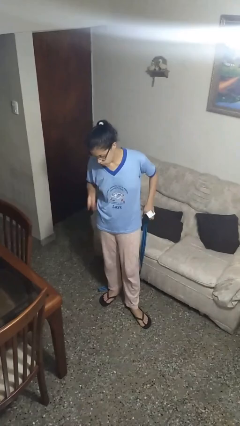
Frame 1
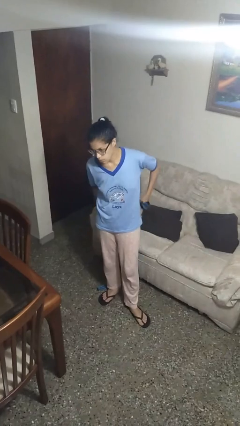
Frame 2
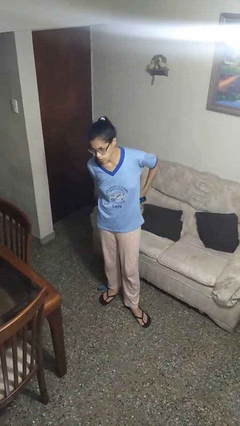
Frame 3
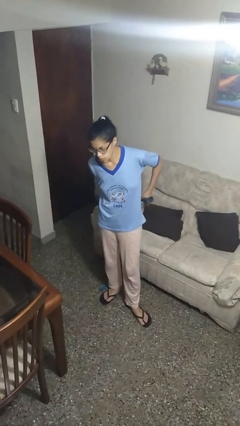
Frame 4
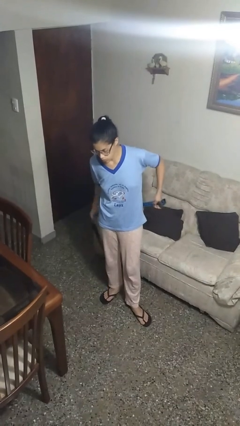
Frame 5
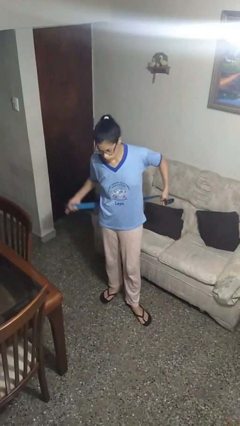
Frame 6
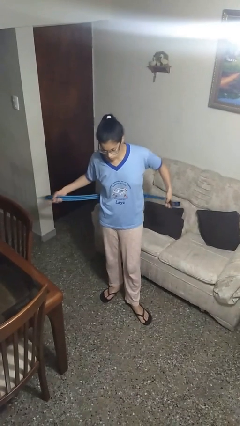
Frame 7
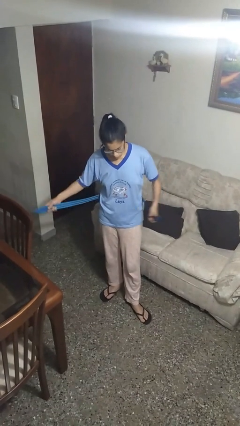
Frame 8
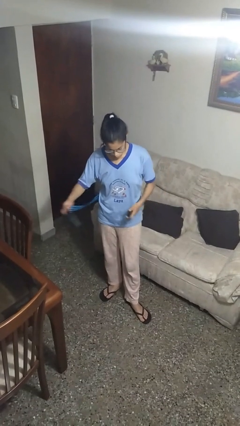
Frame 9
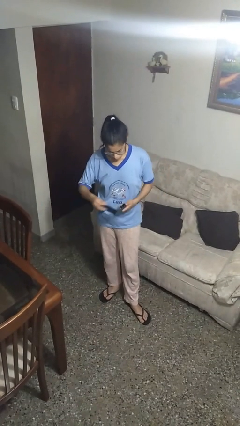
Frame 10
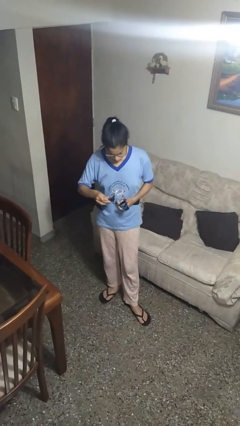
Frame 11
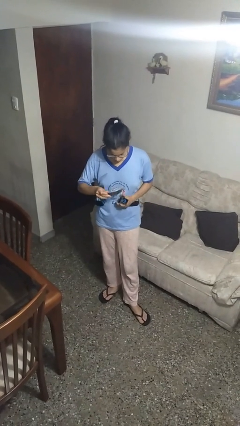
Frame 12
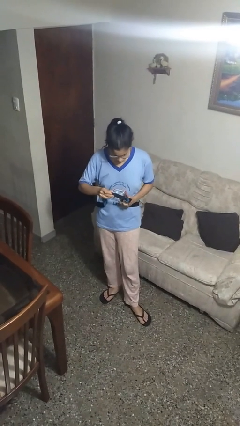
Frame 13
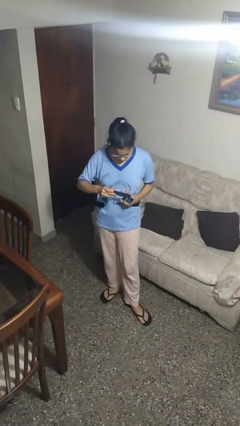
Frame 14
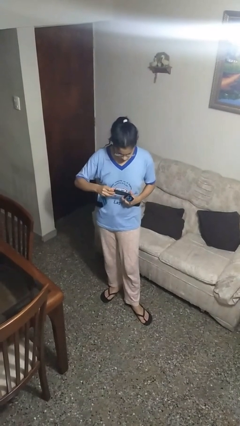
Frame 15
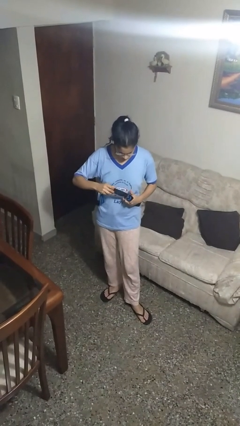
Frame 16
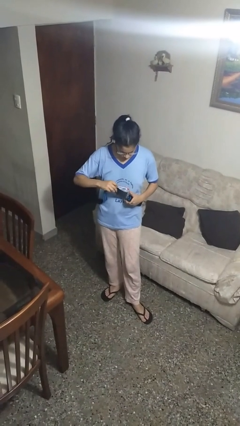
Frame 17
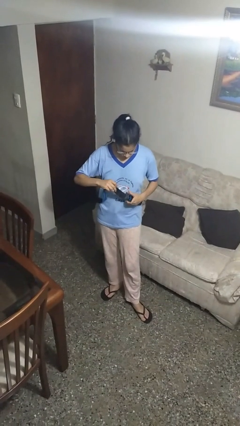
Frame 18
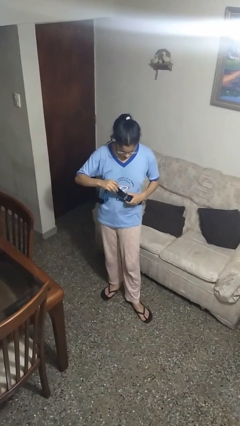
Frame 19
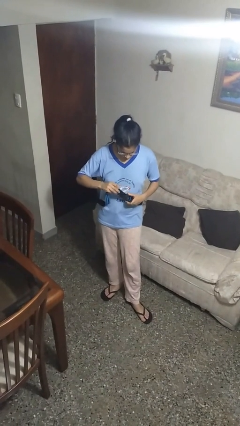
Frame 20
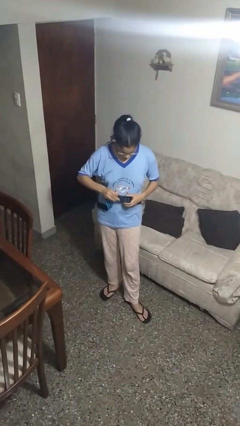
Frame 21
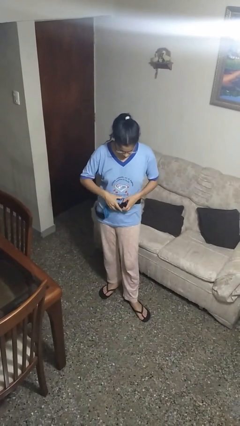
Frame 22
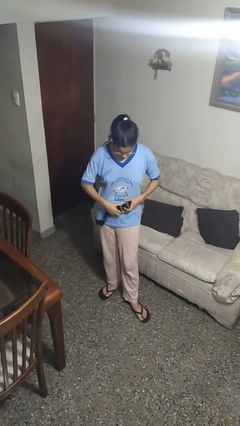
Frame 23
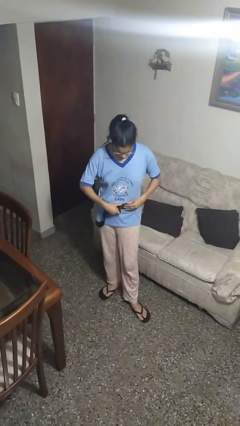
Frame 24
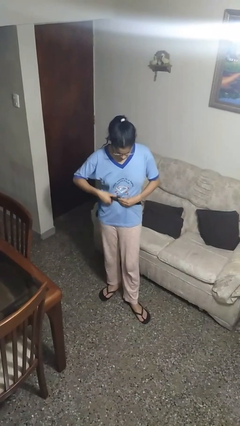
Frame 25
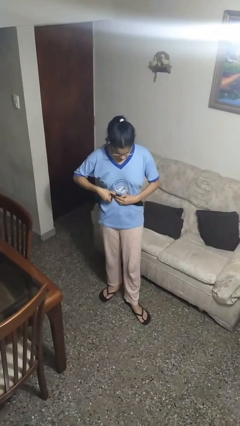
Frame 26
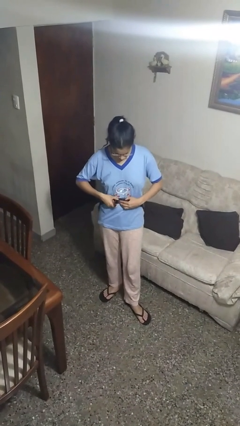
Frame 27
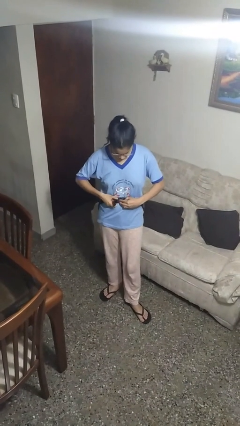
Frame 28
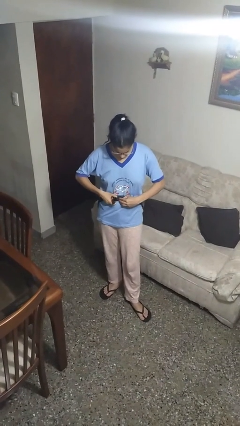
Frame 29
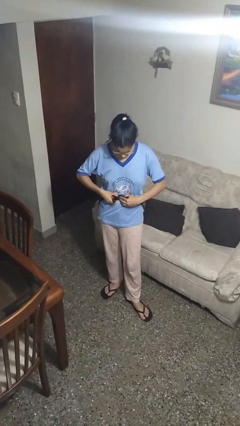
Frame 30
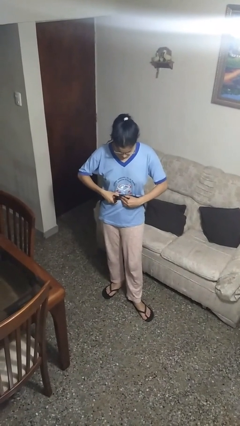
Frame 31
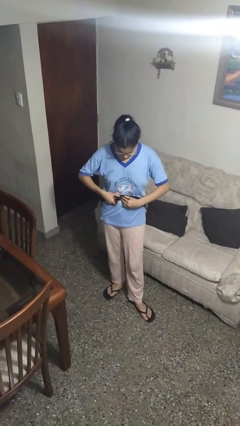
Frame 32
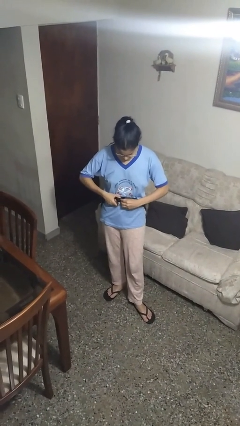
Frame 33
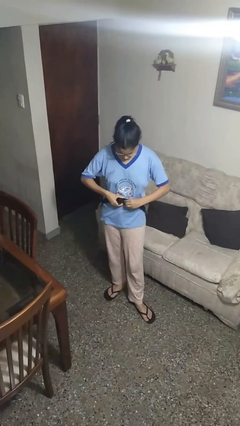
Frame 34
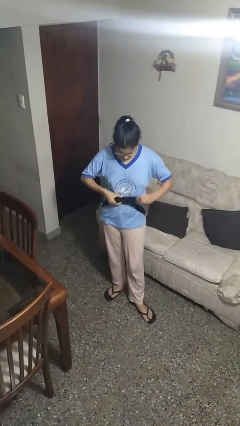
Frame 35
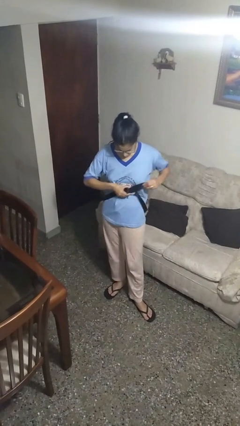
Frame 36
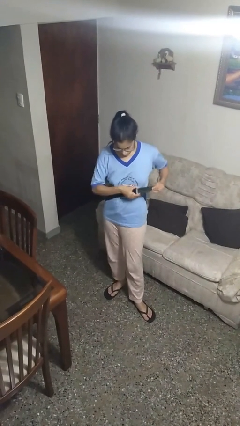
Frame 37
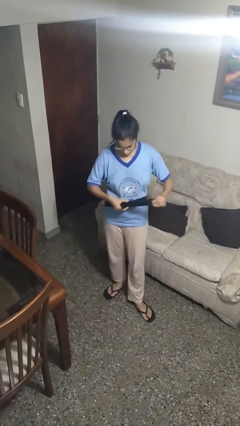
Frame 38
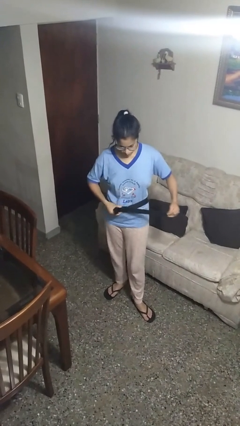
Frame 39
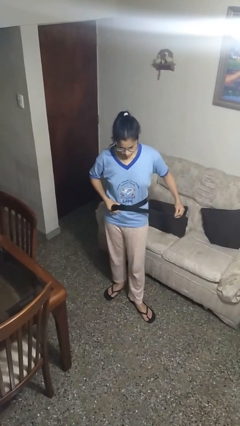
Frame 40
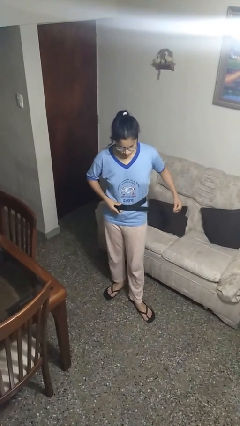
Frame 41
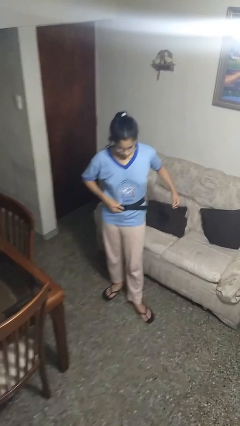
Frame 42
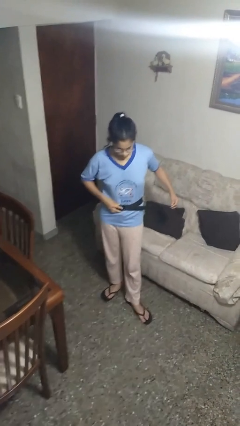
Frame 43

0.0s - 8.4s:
person puts on belt

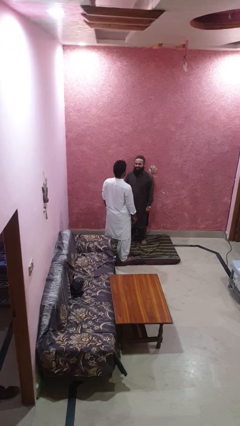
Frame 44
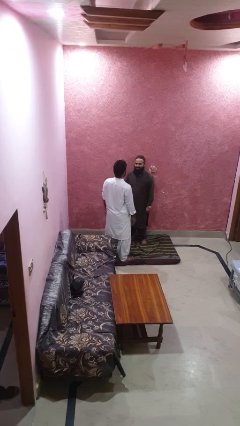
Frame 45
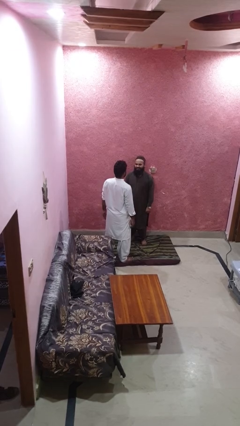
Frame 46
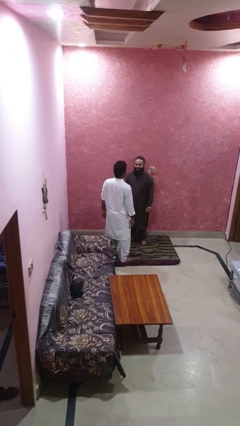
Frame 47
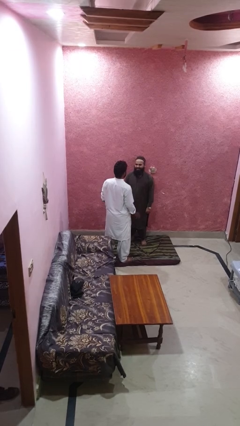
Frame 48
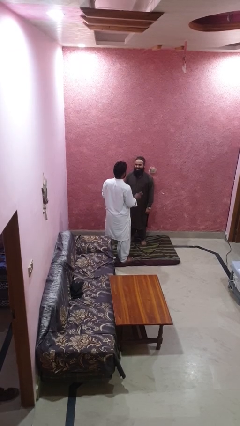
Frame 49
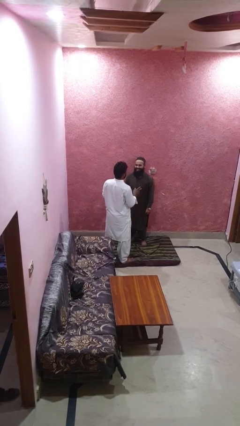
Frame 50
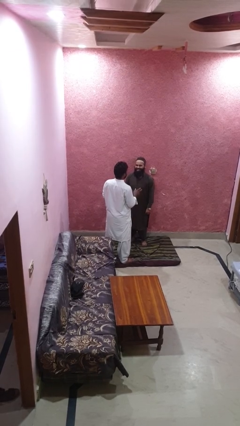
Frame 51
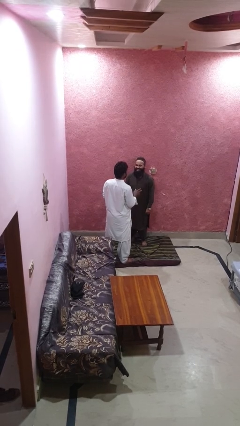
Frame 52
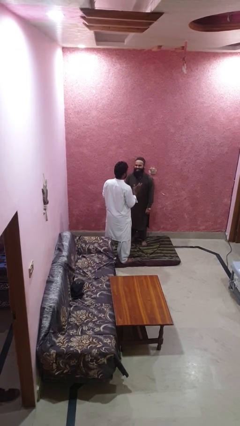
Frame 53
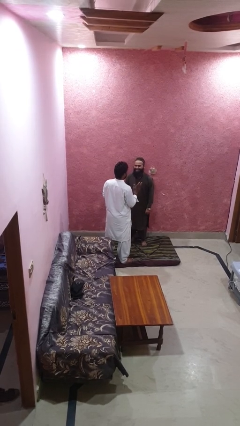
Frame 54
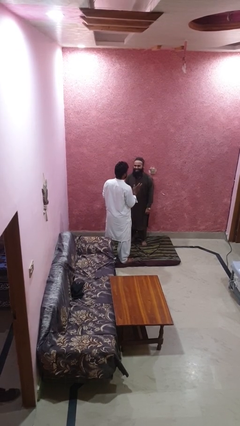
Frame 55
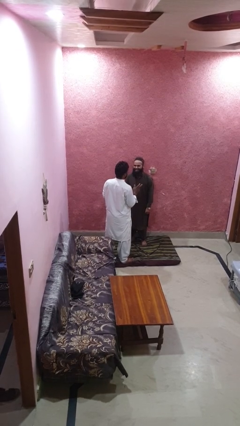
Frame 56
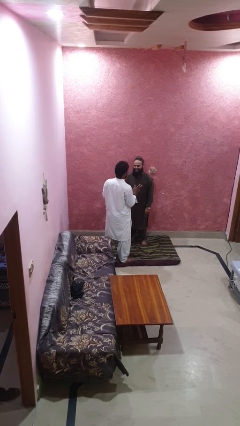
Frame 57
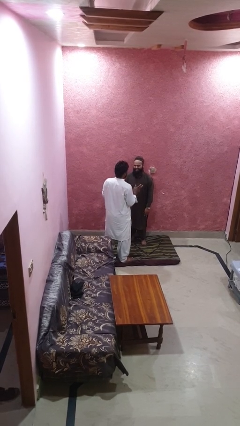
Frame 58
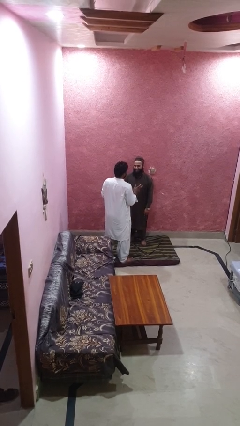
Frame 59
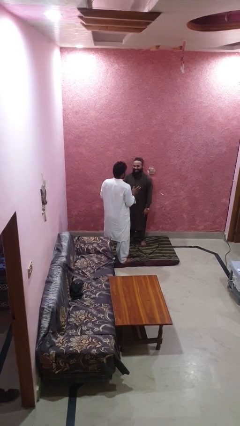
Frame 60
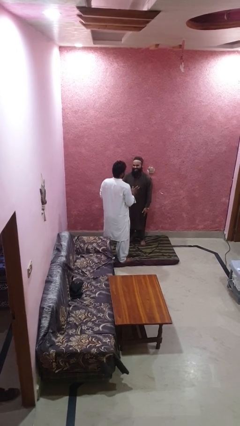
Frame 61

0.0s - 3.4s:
person laughs with person

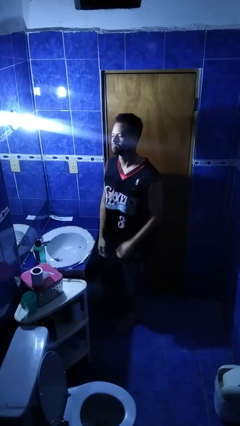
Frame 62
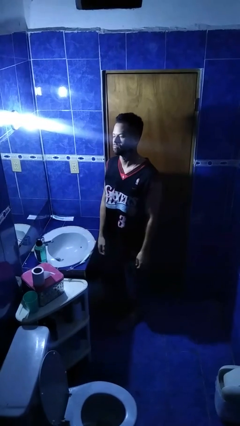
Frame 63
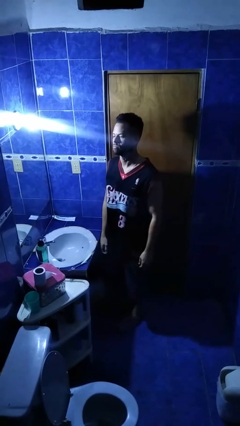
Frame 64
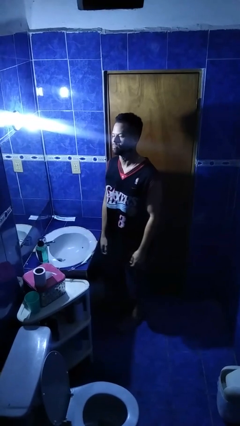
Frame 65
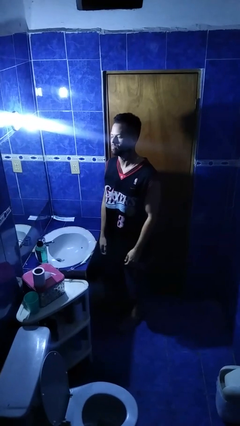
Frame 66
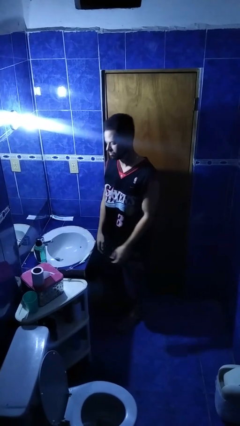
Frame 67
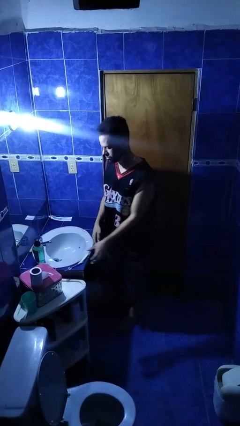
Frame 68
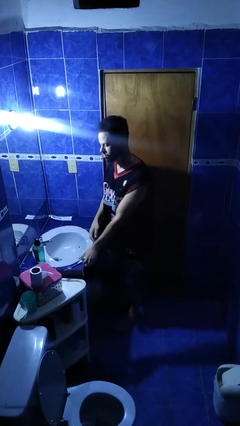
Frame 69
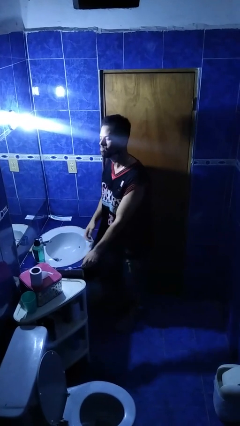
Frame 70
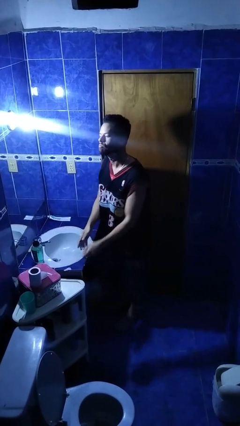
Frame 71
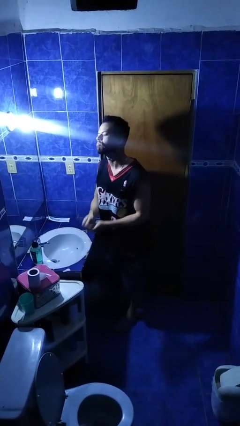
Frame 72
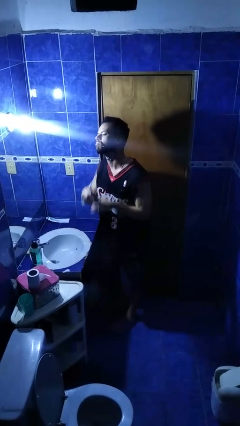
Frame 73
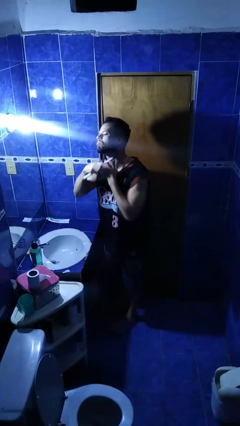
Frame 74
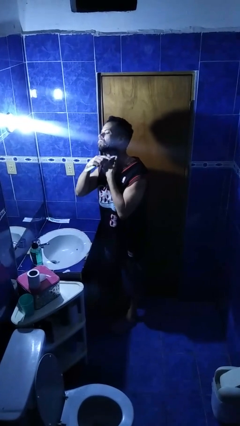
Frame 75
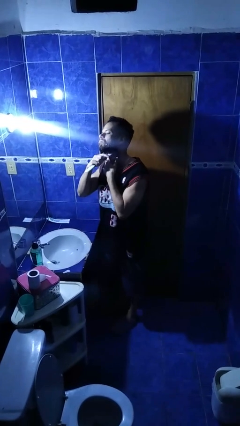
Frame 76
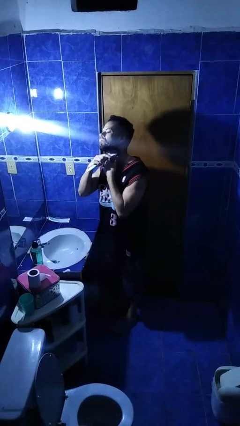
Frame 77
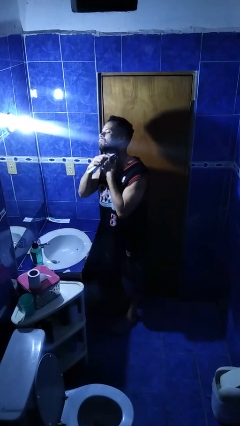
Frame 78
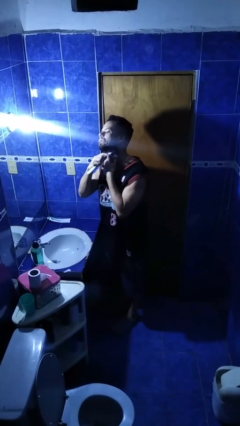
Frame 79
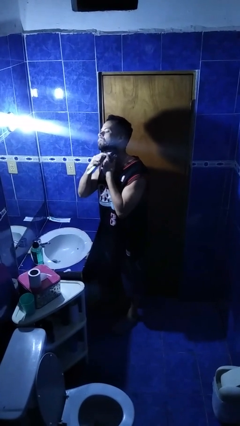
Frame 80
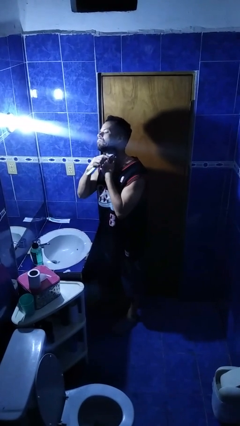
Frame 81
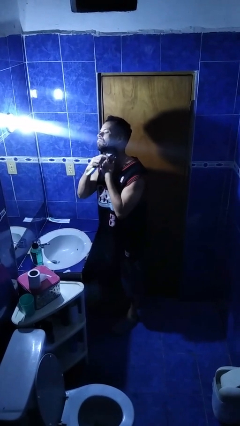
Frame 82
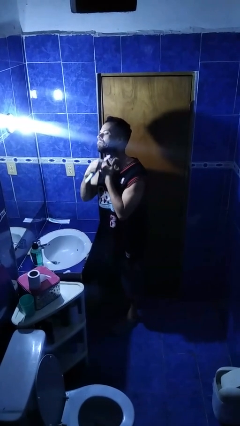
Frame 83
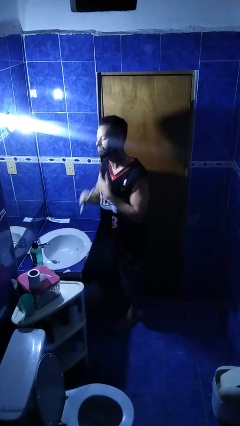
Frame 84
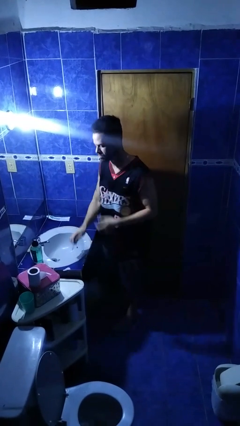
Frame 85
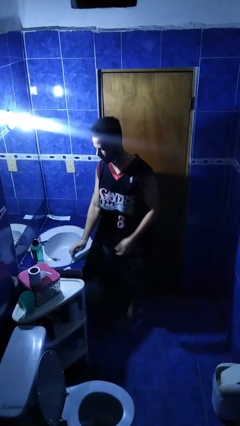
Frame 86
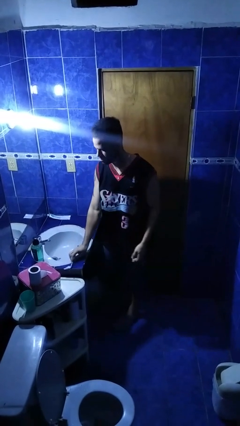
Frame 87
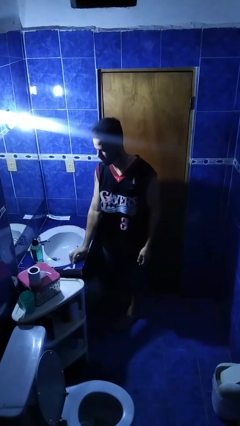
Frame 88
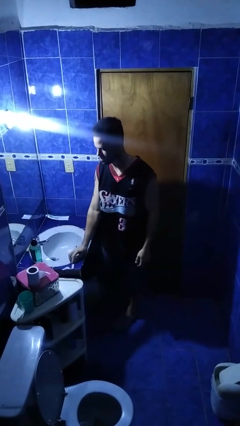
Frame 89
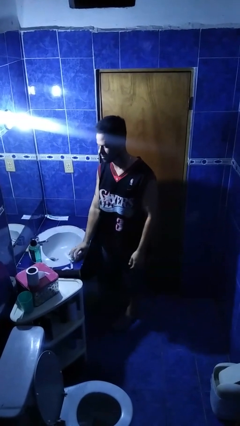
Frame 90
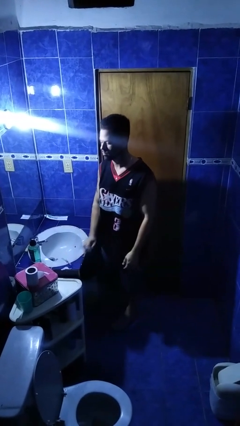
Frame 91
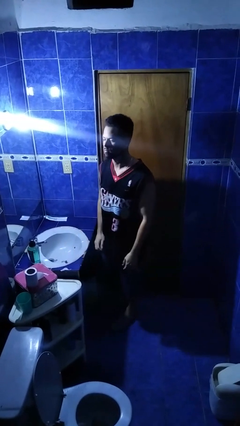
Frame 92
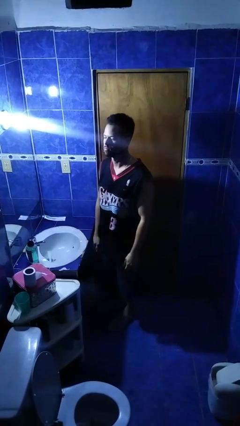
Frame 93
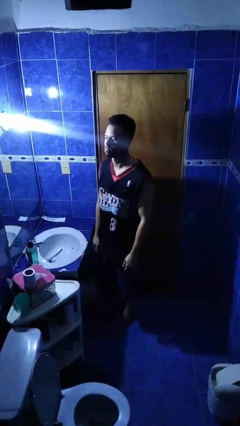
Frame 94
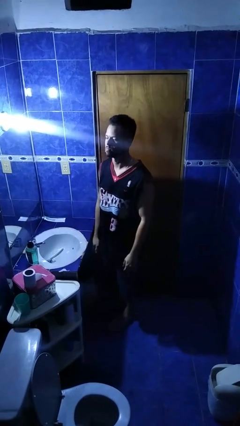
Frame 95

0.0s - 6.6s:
person shaves face
